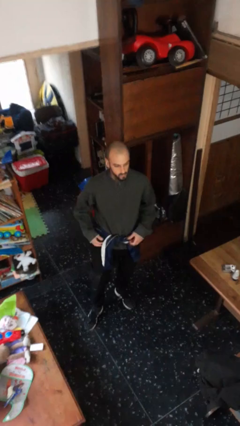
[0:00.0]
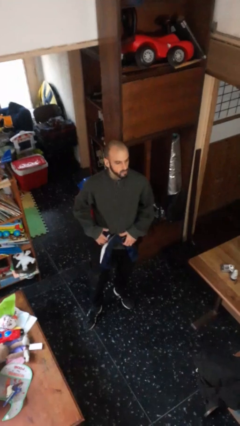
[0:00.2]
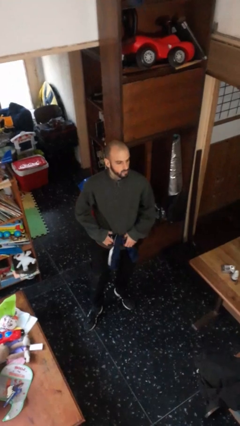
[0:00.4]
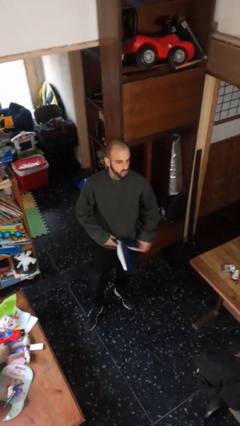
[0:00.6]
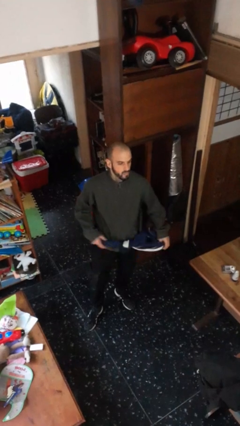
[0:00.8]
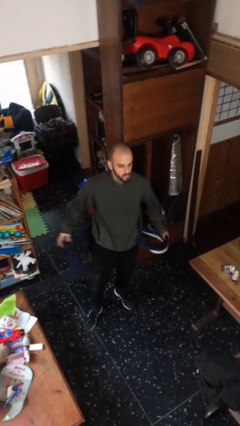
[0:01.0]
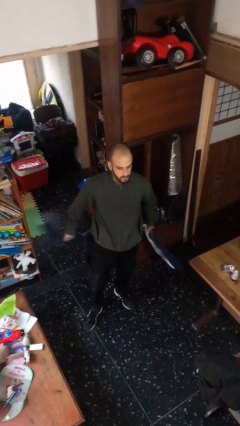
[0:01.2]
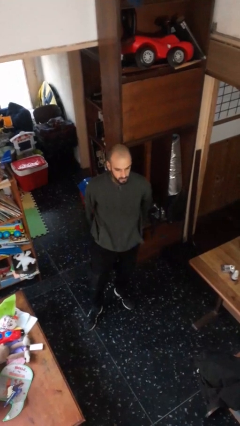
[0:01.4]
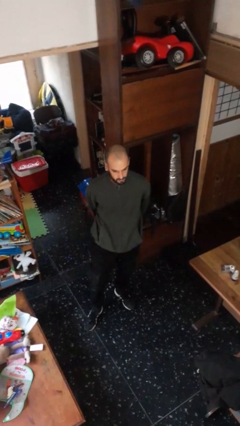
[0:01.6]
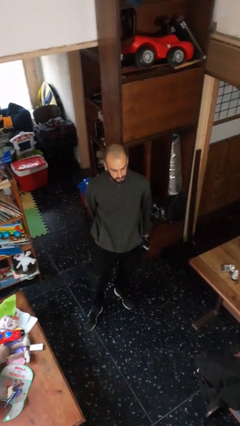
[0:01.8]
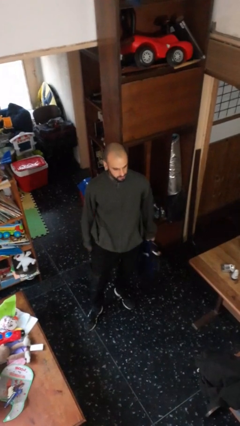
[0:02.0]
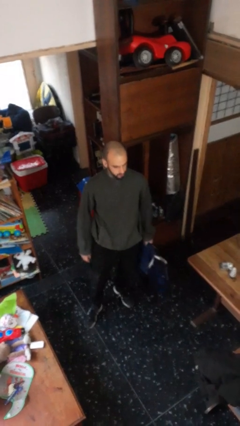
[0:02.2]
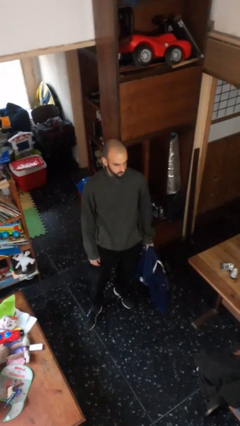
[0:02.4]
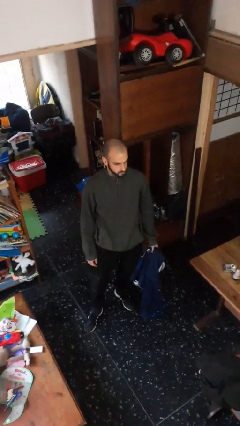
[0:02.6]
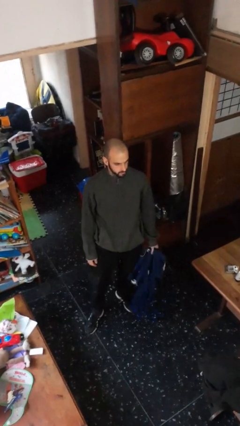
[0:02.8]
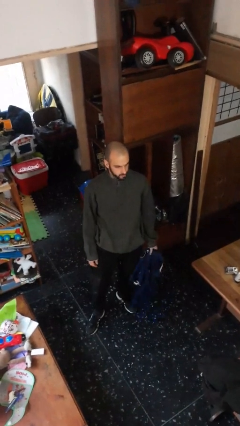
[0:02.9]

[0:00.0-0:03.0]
person unties jacket around waist

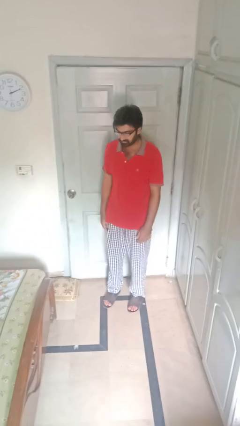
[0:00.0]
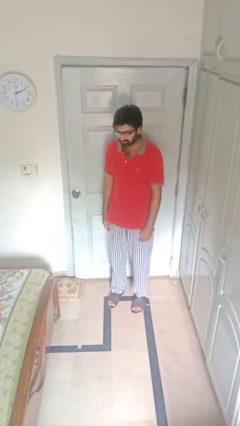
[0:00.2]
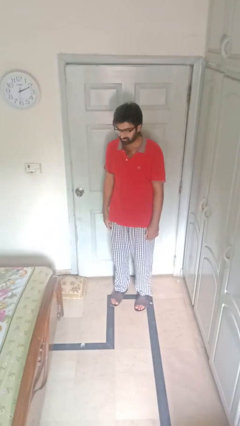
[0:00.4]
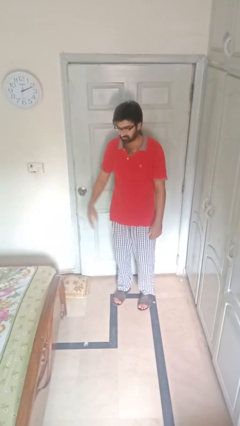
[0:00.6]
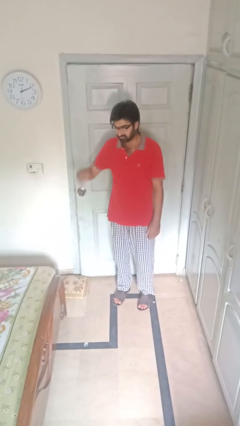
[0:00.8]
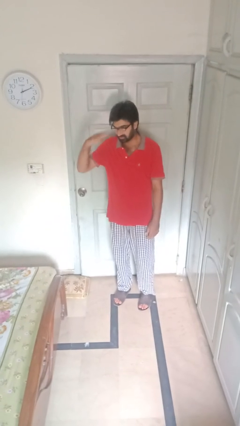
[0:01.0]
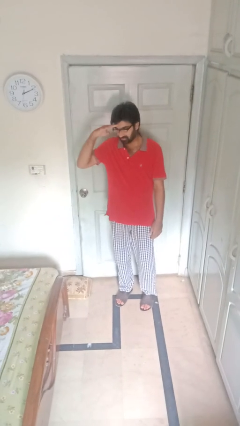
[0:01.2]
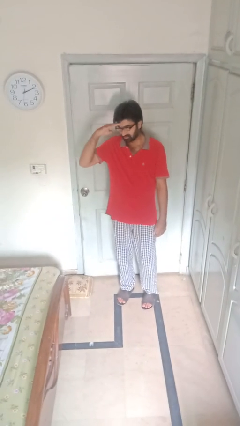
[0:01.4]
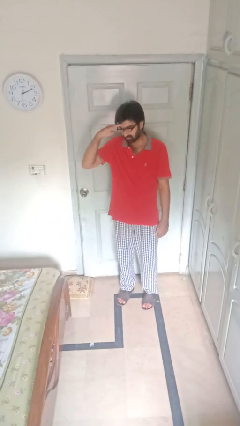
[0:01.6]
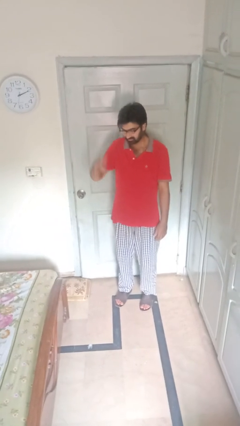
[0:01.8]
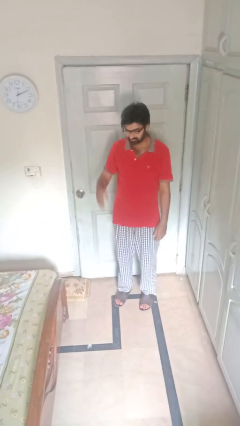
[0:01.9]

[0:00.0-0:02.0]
person salutes

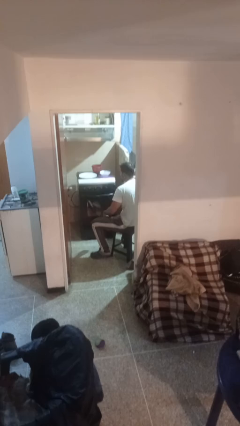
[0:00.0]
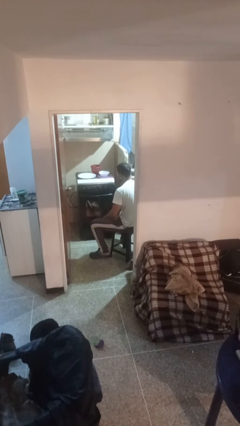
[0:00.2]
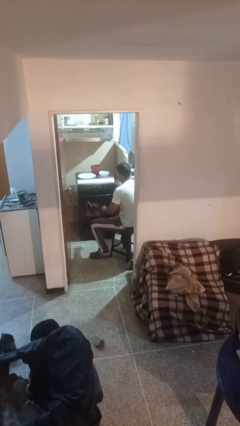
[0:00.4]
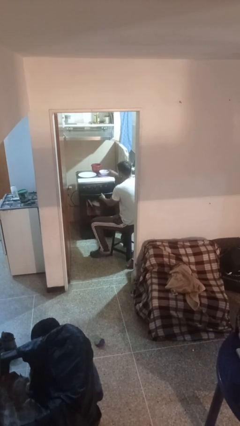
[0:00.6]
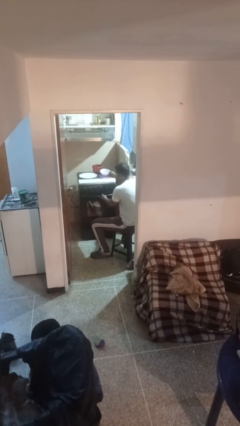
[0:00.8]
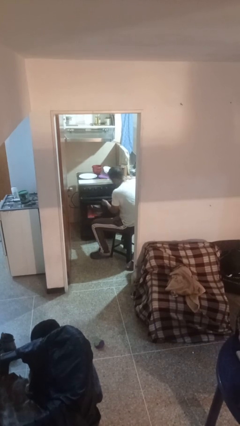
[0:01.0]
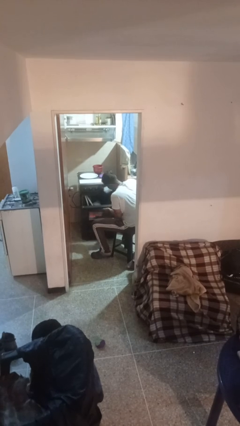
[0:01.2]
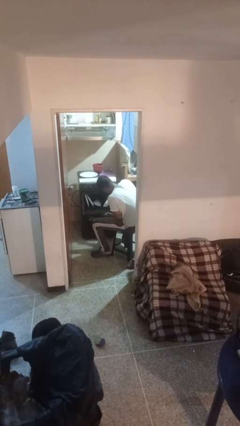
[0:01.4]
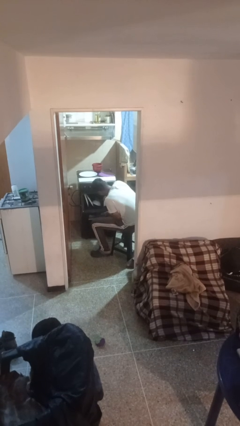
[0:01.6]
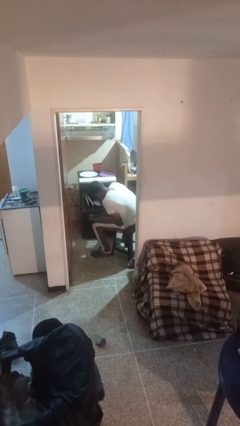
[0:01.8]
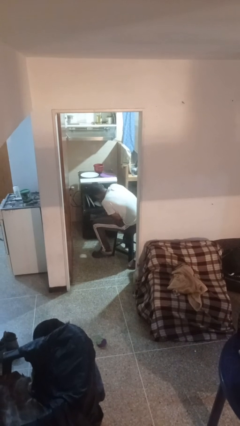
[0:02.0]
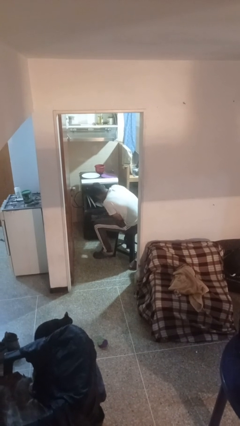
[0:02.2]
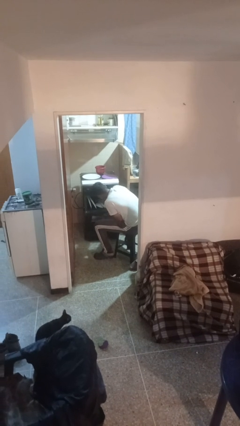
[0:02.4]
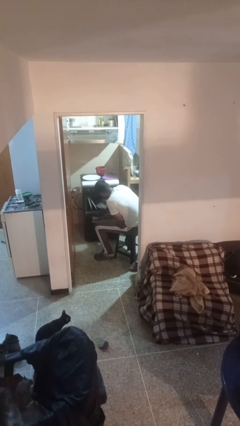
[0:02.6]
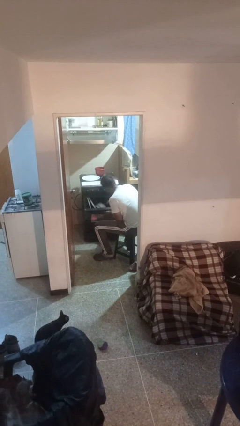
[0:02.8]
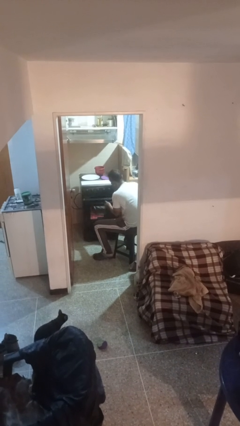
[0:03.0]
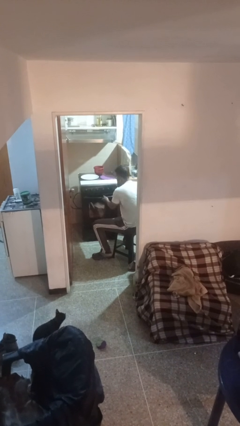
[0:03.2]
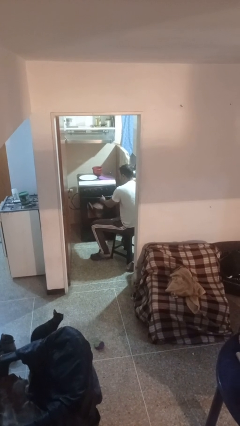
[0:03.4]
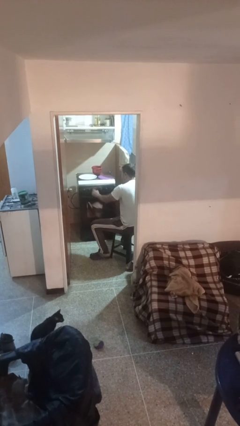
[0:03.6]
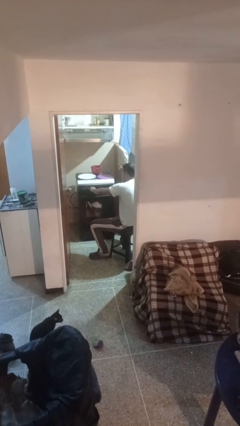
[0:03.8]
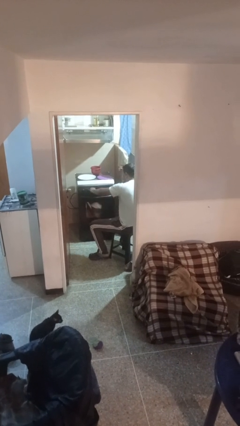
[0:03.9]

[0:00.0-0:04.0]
person loads dishwasher

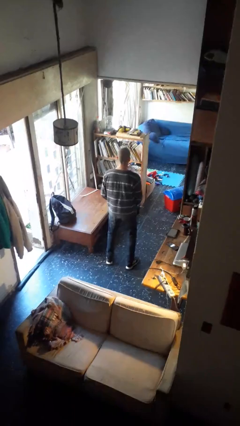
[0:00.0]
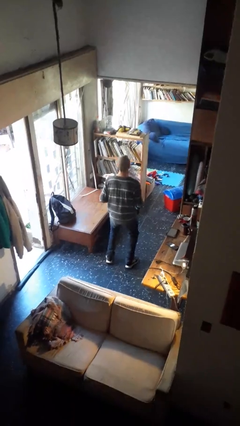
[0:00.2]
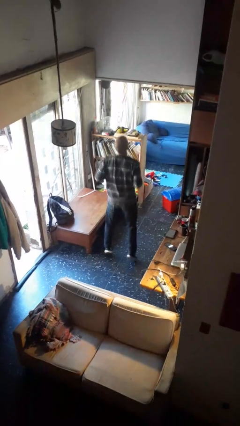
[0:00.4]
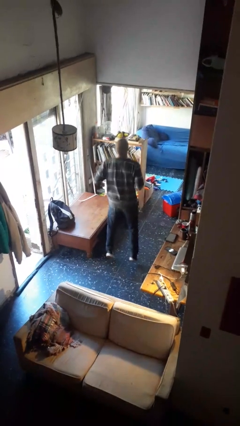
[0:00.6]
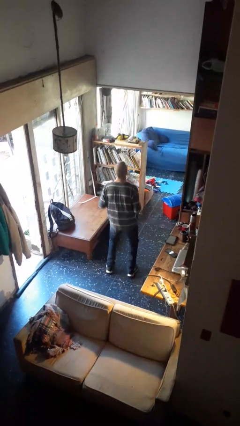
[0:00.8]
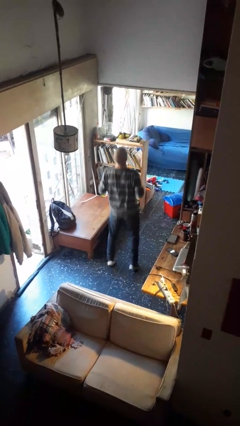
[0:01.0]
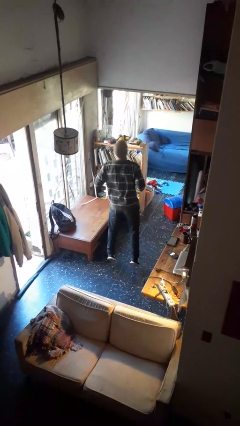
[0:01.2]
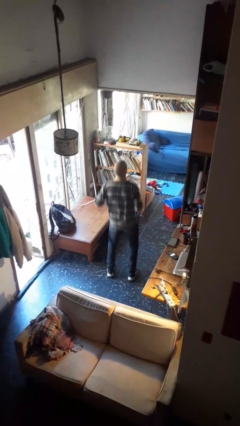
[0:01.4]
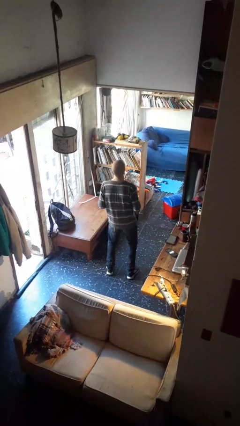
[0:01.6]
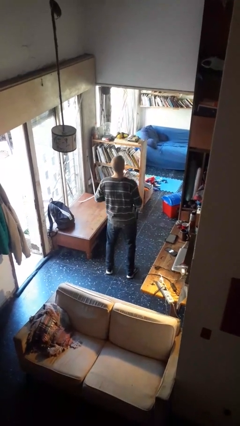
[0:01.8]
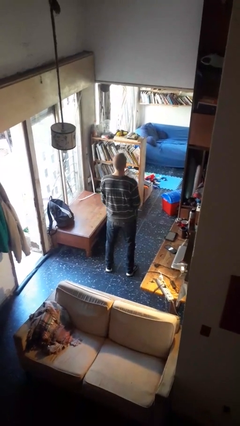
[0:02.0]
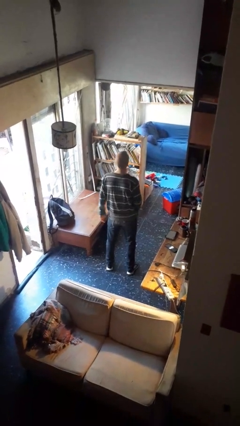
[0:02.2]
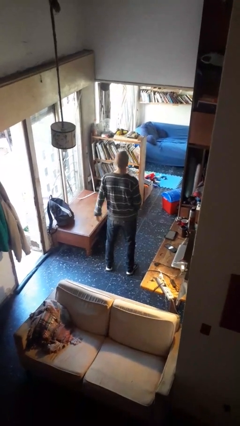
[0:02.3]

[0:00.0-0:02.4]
person jumps

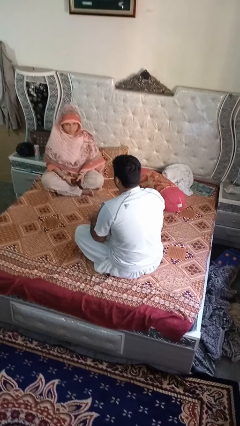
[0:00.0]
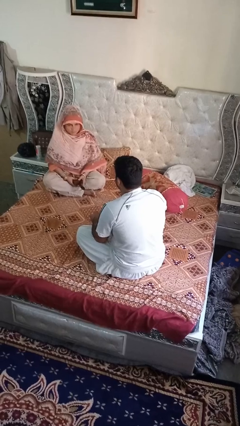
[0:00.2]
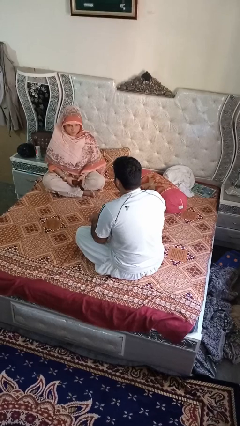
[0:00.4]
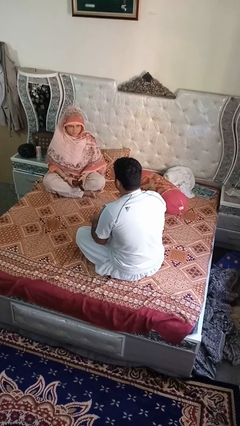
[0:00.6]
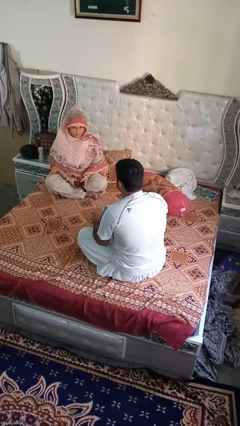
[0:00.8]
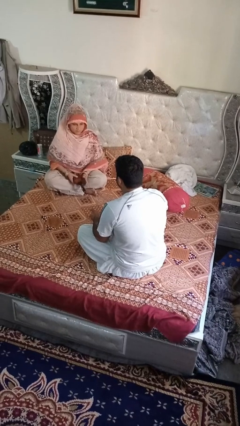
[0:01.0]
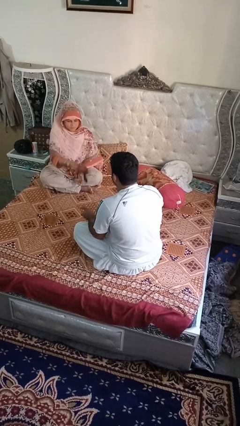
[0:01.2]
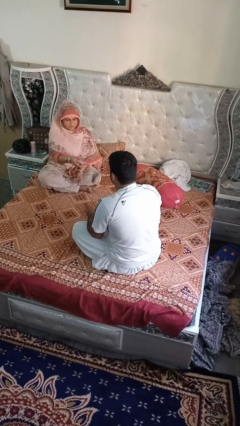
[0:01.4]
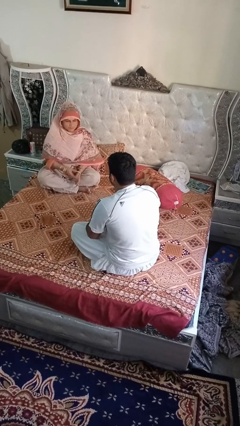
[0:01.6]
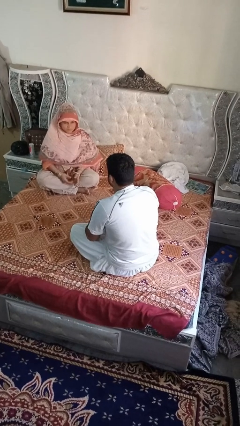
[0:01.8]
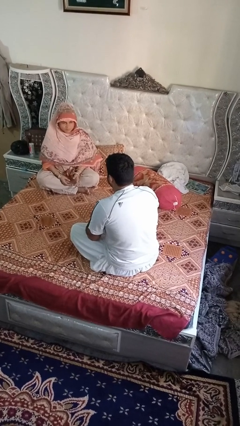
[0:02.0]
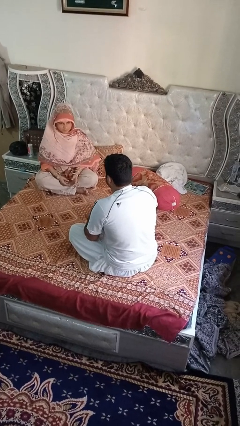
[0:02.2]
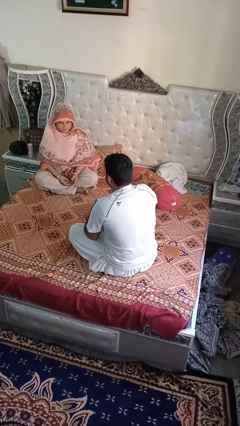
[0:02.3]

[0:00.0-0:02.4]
person catches object from person

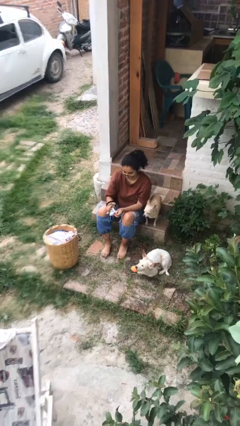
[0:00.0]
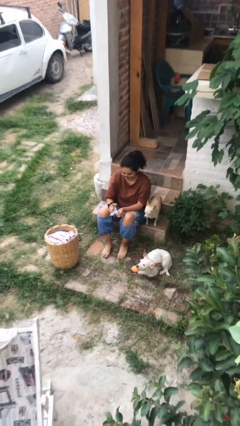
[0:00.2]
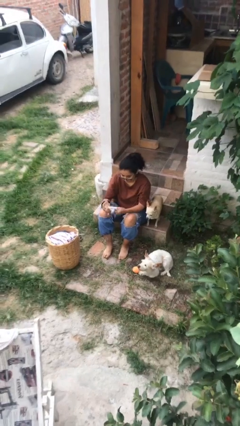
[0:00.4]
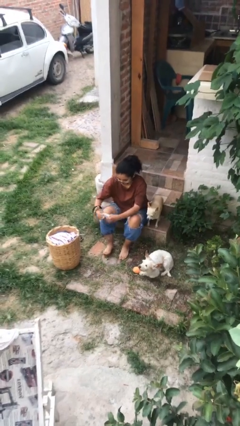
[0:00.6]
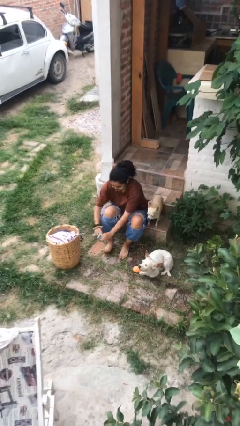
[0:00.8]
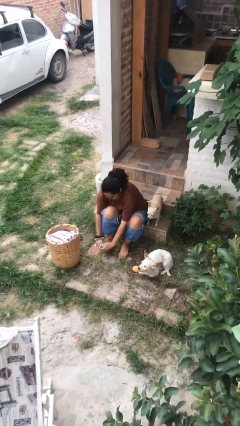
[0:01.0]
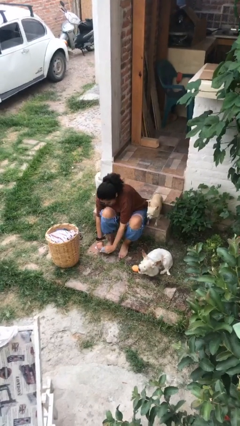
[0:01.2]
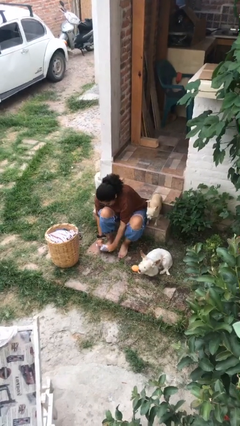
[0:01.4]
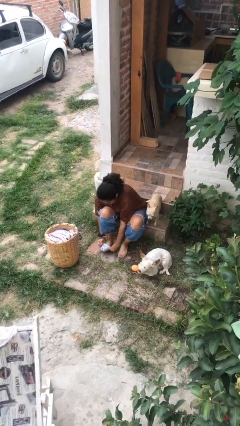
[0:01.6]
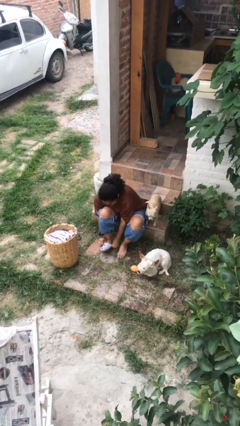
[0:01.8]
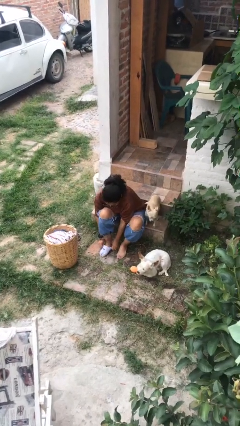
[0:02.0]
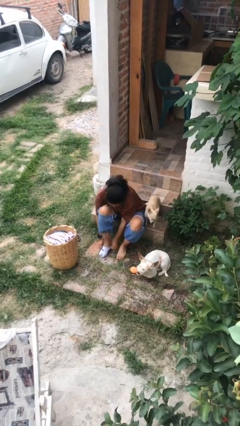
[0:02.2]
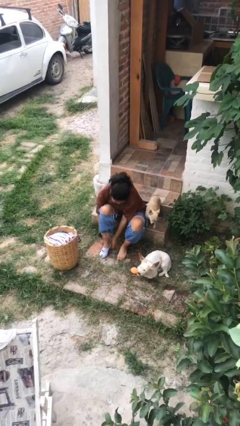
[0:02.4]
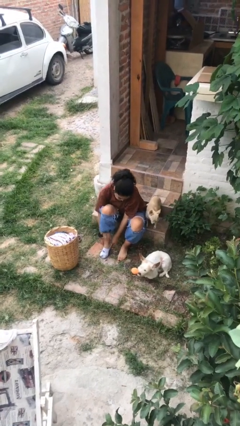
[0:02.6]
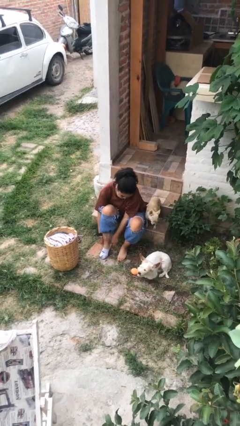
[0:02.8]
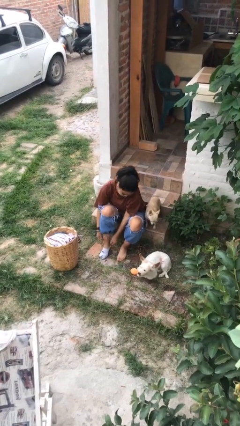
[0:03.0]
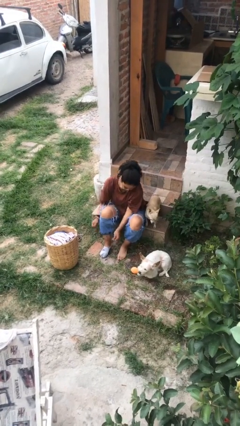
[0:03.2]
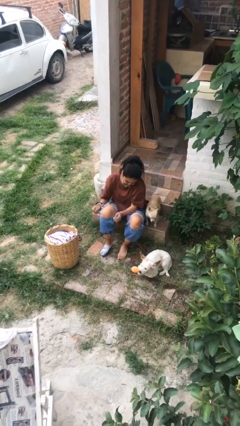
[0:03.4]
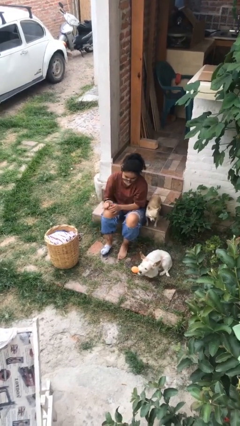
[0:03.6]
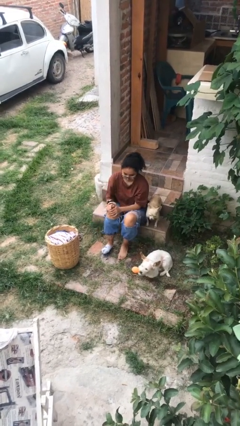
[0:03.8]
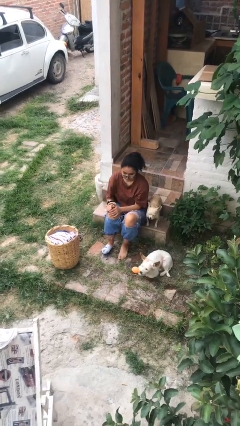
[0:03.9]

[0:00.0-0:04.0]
person puts on socks
